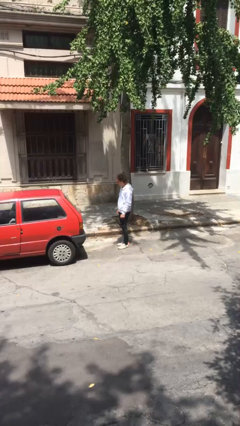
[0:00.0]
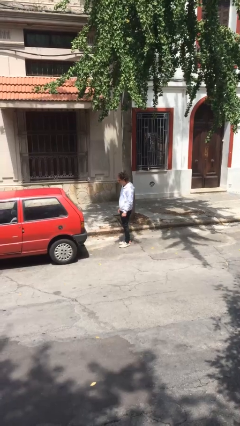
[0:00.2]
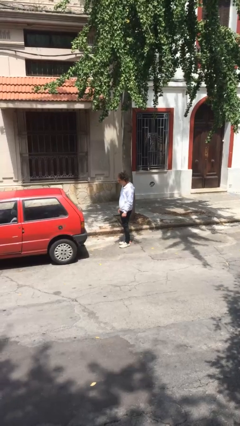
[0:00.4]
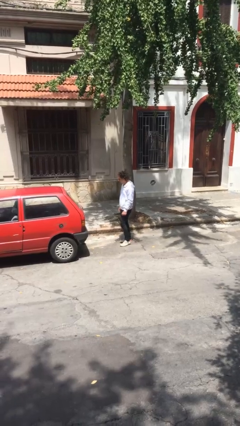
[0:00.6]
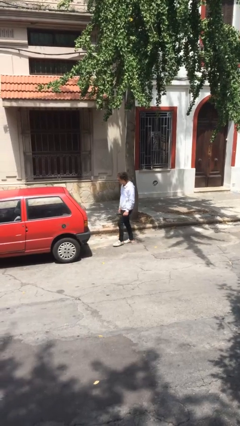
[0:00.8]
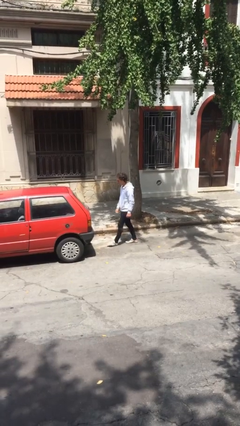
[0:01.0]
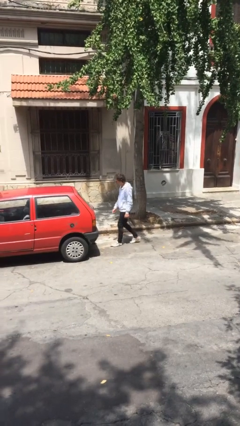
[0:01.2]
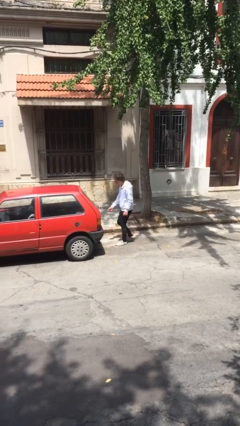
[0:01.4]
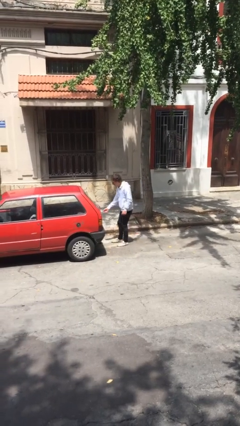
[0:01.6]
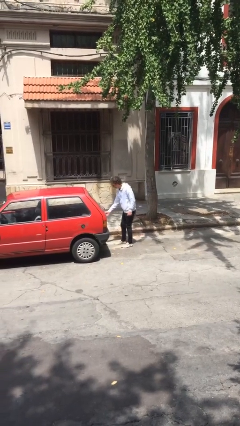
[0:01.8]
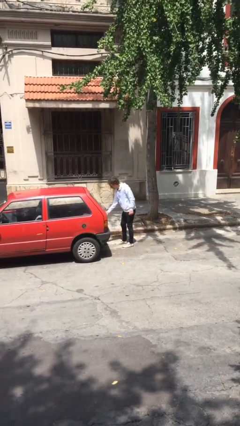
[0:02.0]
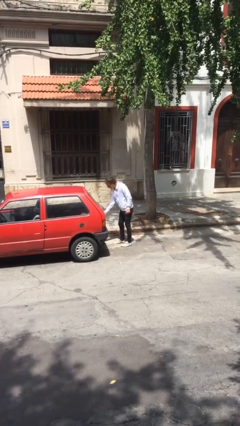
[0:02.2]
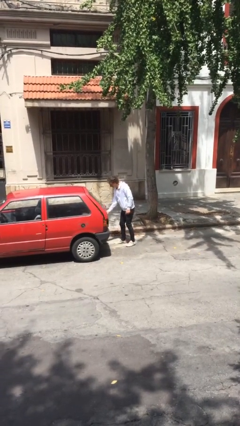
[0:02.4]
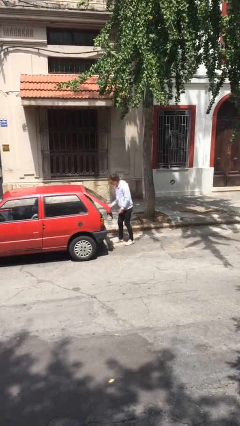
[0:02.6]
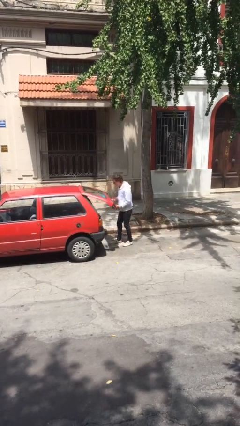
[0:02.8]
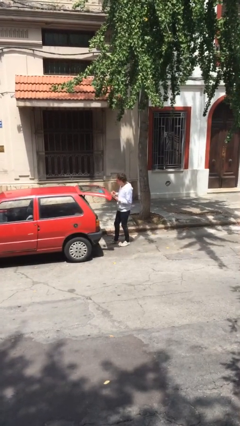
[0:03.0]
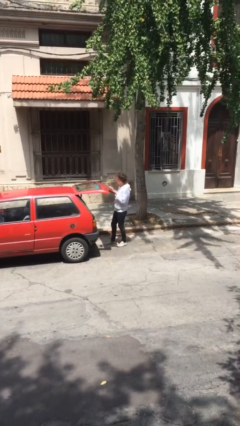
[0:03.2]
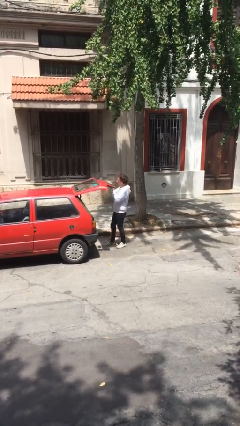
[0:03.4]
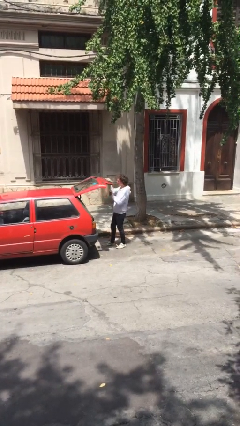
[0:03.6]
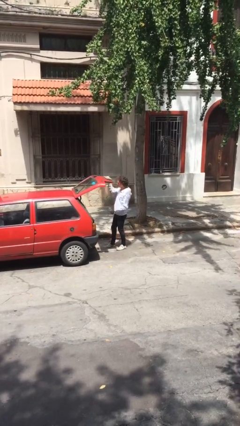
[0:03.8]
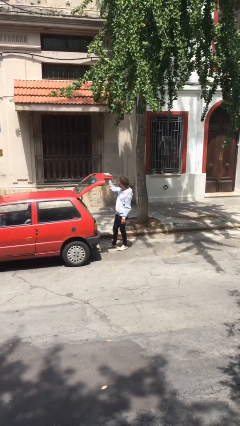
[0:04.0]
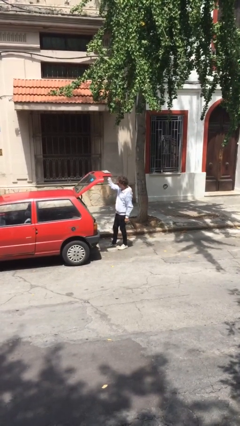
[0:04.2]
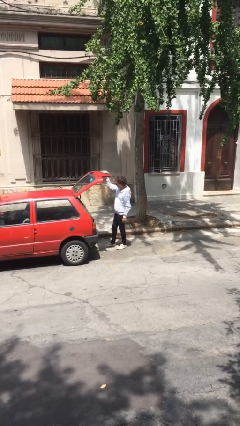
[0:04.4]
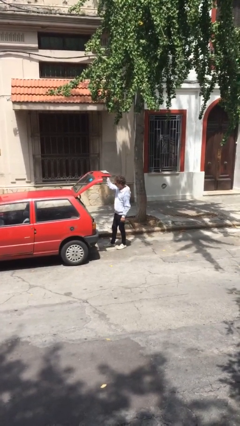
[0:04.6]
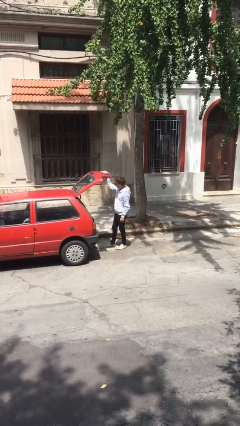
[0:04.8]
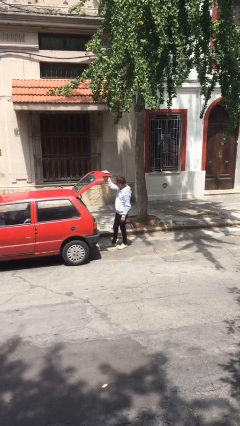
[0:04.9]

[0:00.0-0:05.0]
person opens car trunk

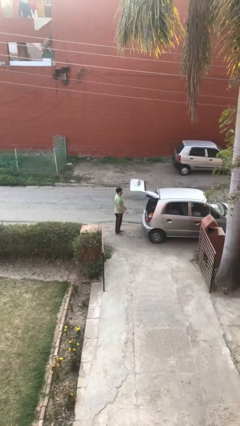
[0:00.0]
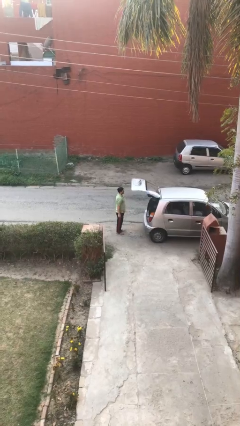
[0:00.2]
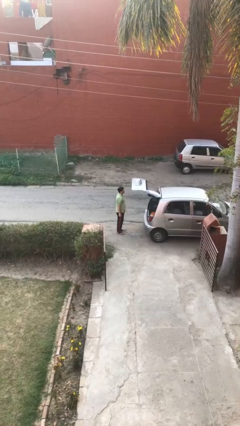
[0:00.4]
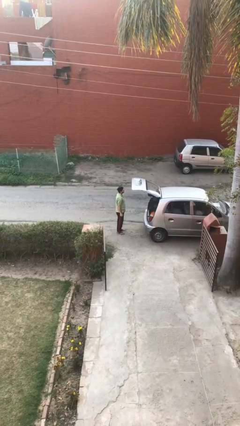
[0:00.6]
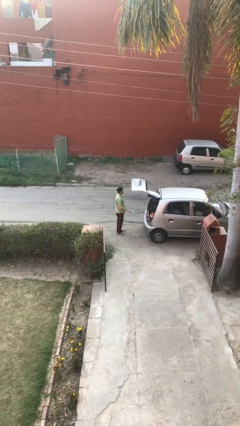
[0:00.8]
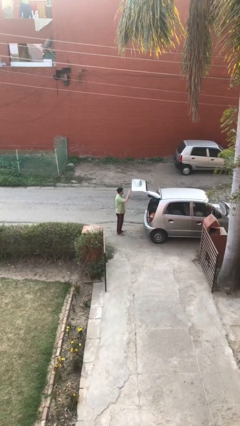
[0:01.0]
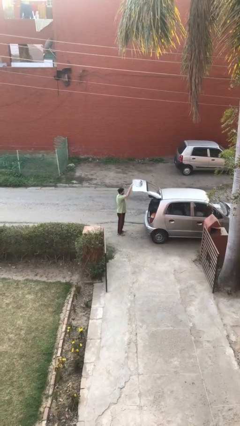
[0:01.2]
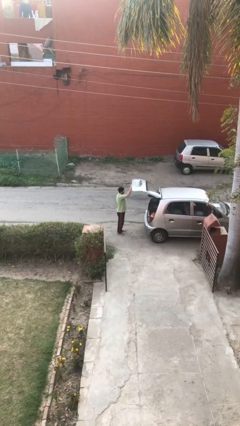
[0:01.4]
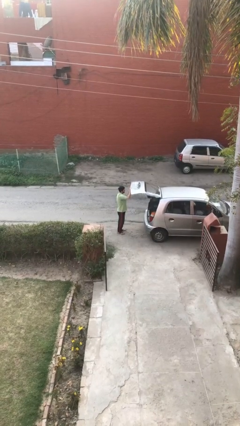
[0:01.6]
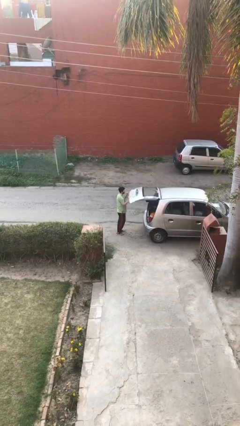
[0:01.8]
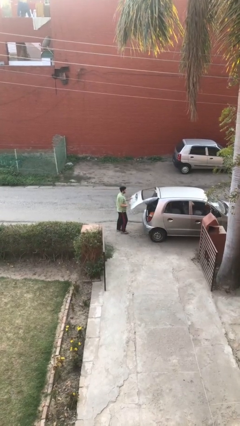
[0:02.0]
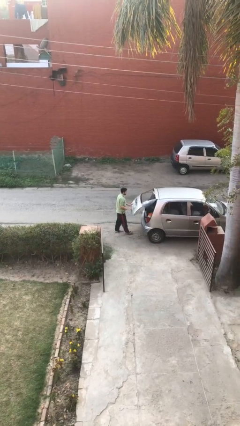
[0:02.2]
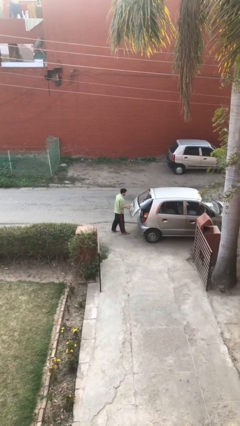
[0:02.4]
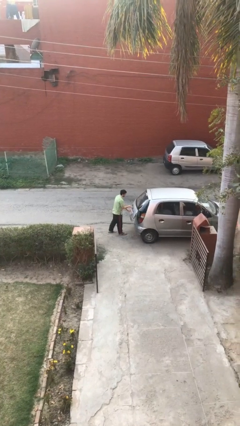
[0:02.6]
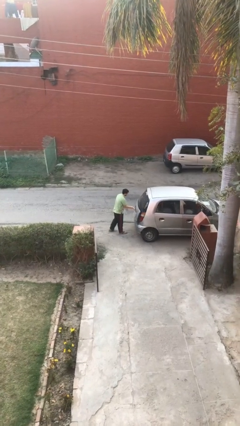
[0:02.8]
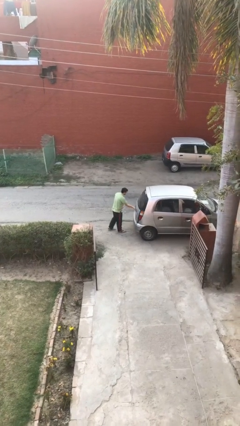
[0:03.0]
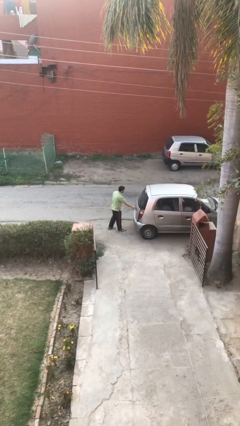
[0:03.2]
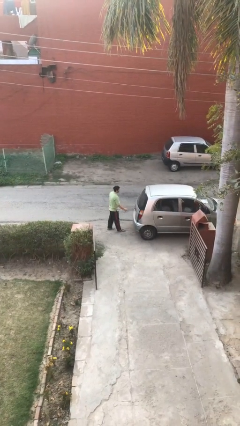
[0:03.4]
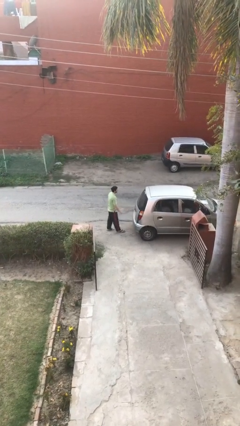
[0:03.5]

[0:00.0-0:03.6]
person closes car trunk

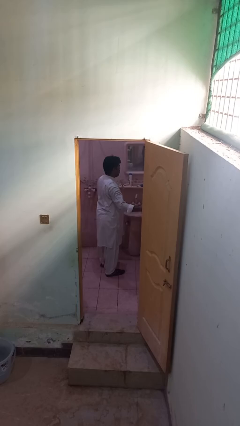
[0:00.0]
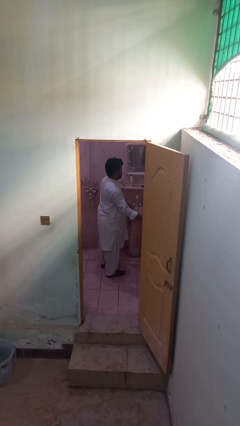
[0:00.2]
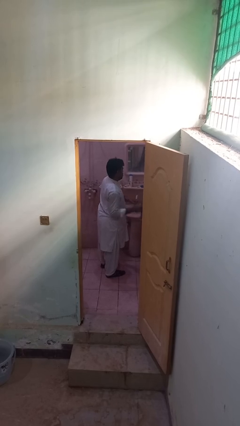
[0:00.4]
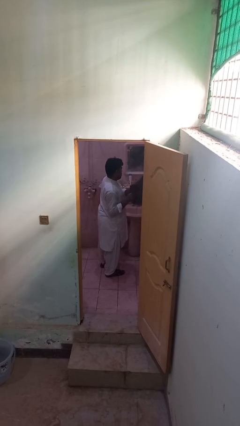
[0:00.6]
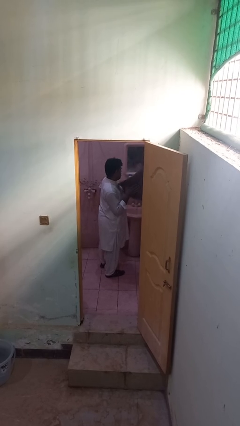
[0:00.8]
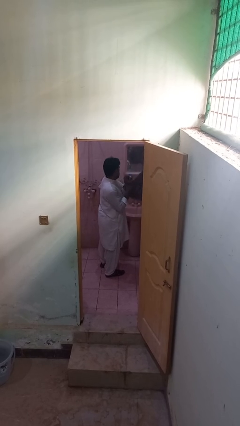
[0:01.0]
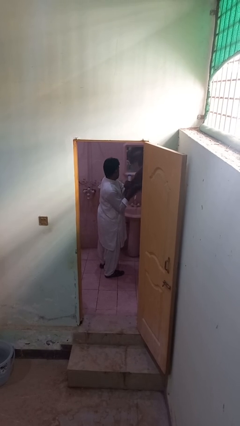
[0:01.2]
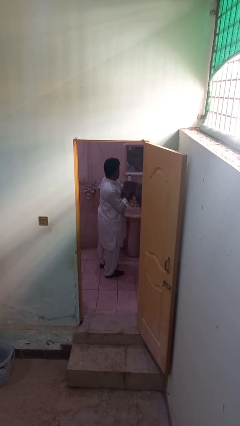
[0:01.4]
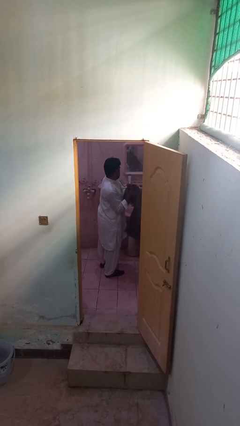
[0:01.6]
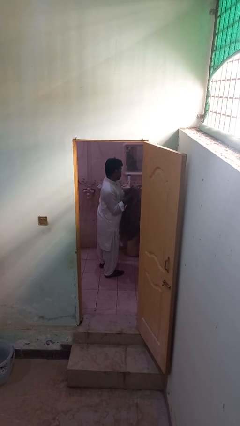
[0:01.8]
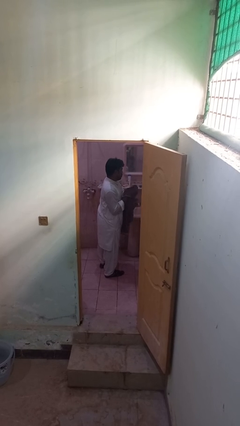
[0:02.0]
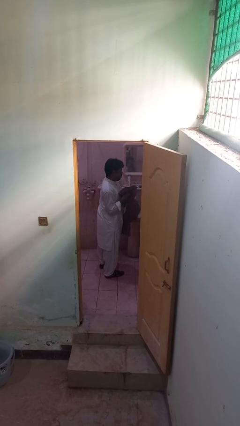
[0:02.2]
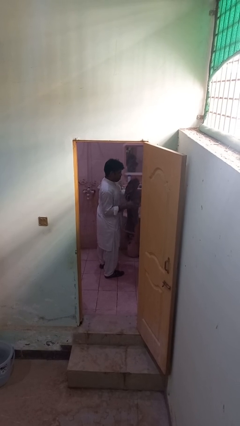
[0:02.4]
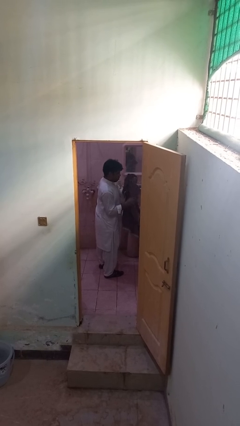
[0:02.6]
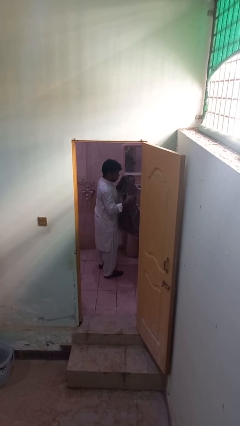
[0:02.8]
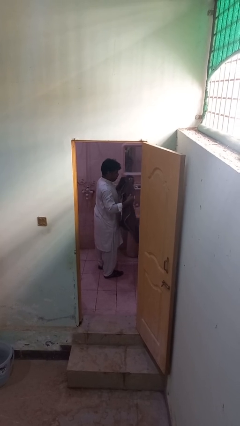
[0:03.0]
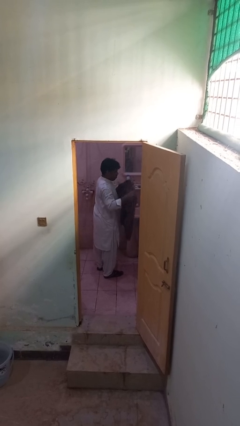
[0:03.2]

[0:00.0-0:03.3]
person dries hands with towel

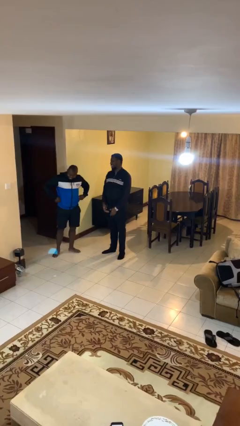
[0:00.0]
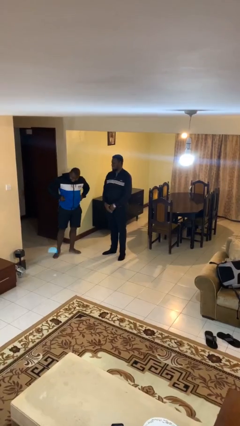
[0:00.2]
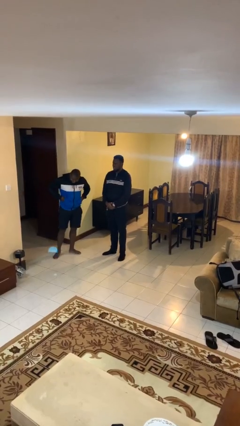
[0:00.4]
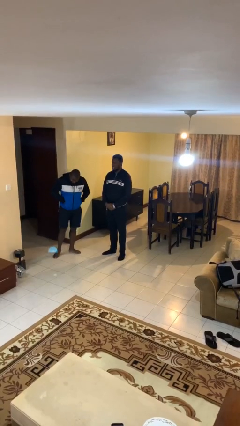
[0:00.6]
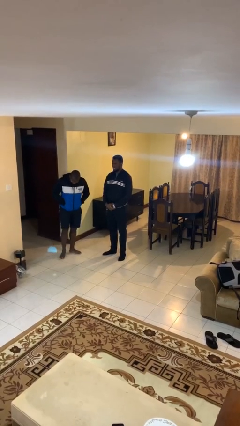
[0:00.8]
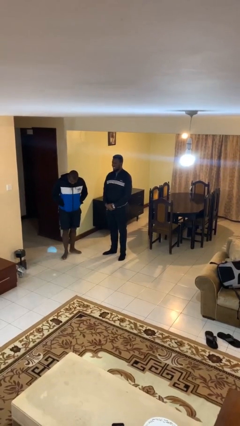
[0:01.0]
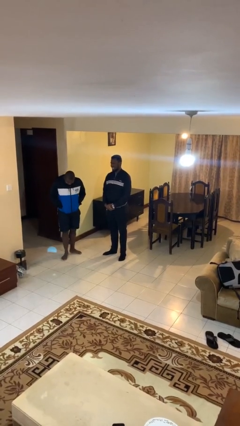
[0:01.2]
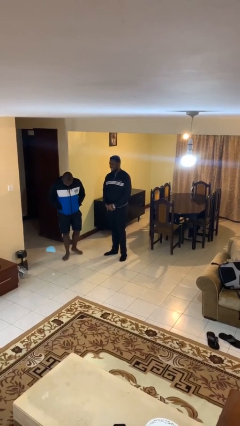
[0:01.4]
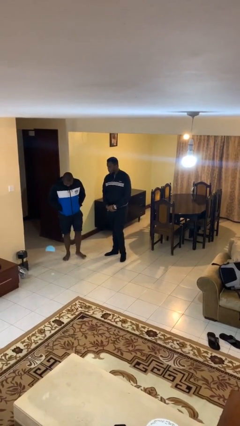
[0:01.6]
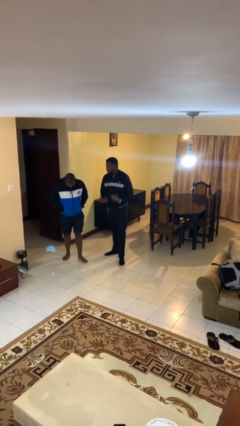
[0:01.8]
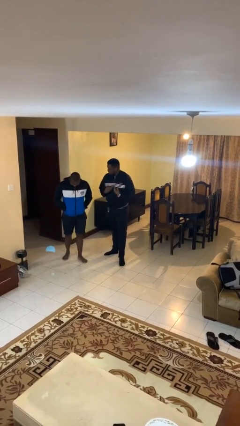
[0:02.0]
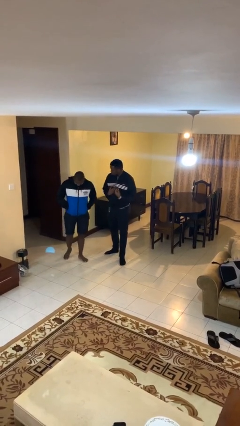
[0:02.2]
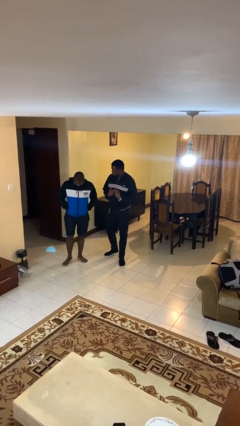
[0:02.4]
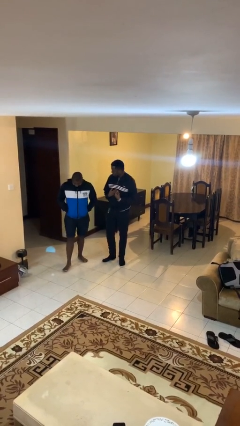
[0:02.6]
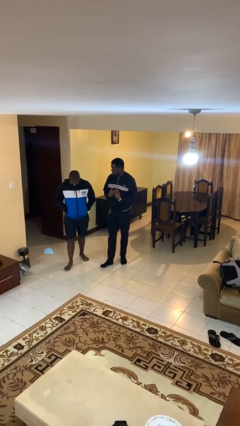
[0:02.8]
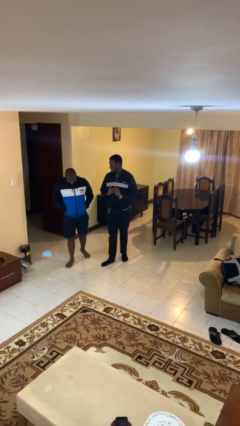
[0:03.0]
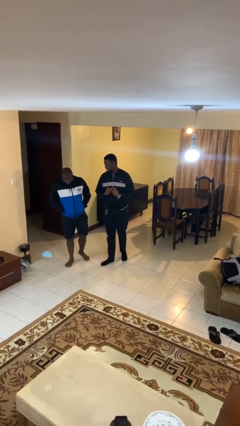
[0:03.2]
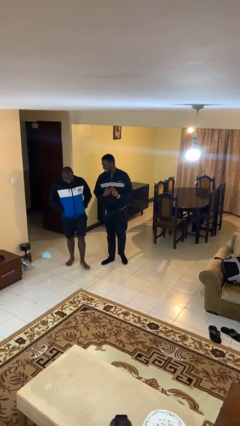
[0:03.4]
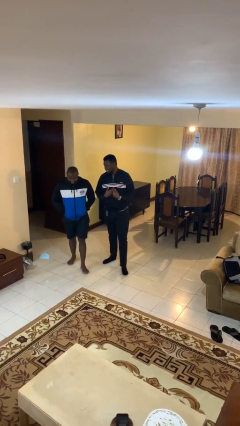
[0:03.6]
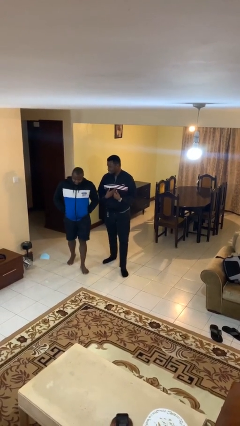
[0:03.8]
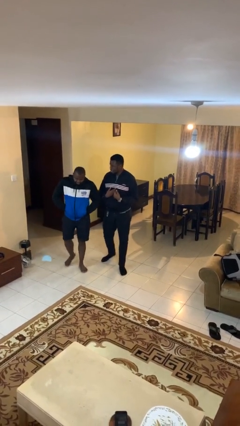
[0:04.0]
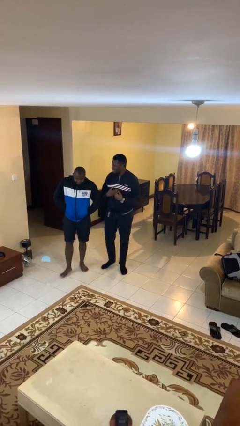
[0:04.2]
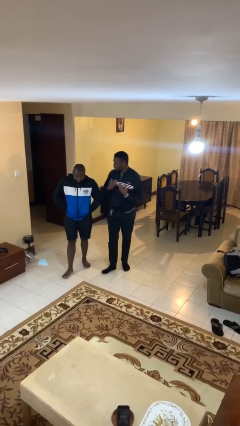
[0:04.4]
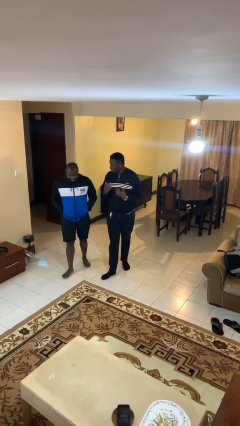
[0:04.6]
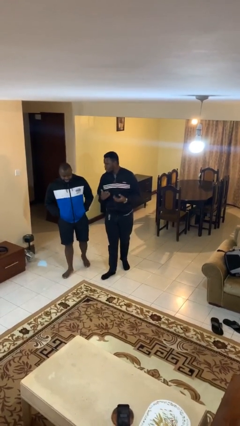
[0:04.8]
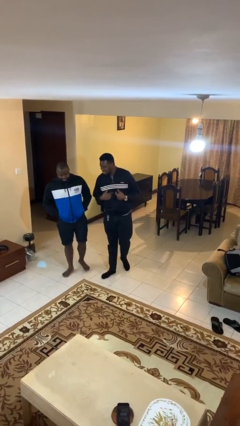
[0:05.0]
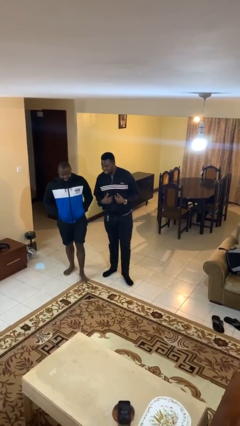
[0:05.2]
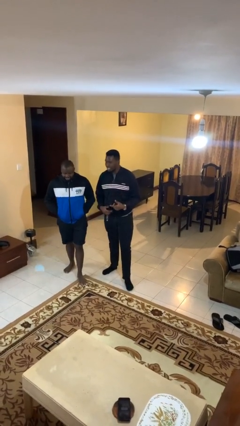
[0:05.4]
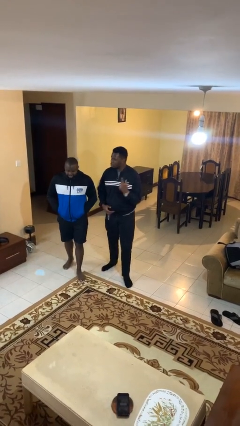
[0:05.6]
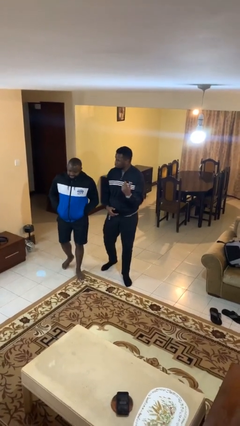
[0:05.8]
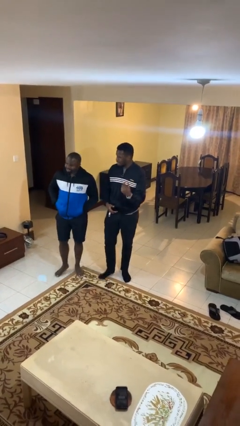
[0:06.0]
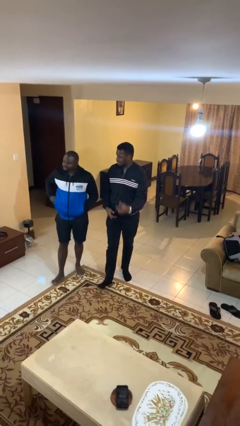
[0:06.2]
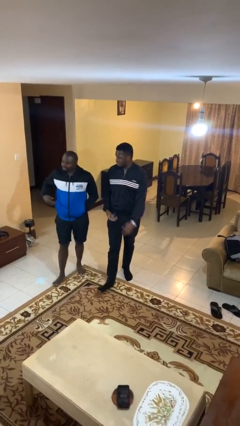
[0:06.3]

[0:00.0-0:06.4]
person talks to person
